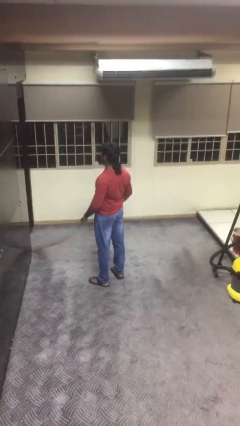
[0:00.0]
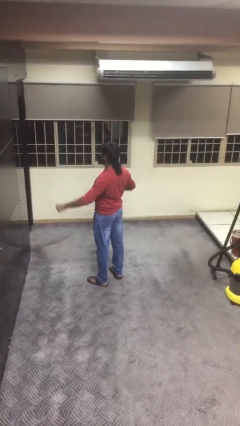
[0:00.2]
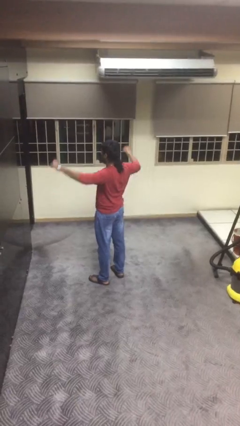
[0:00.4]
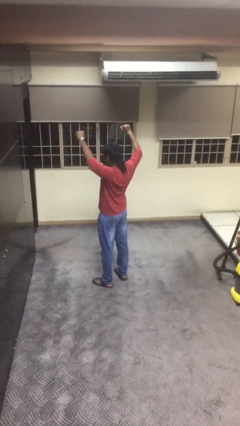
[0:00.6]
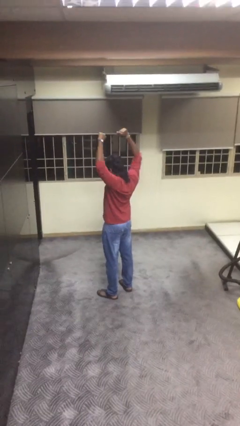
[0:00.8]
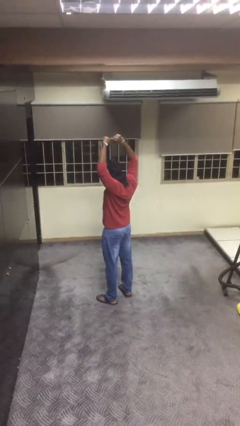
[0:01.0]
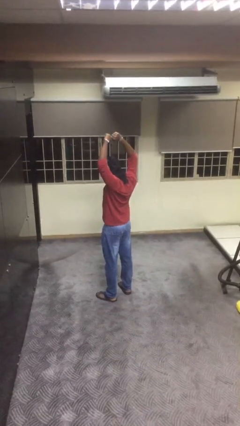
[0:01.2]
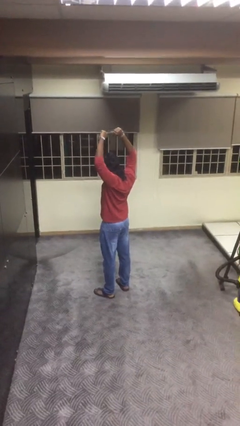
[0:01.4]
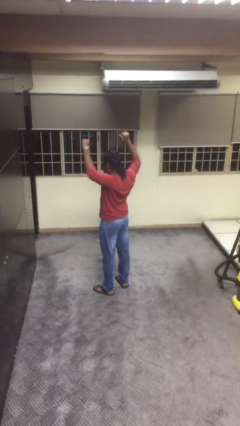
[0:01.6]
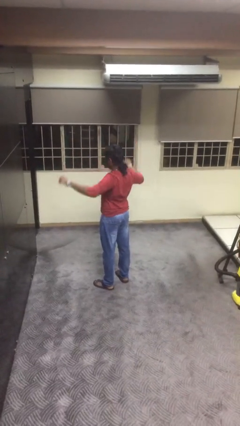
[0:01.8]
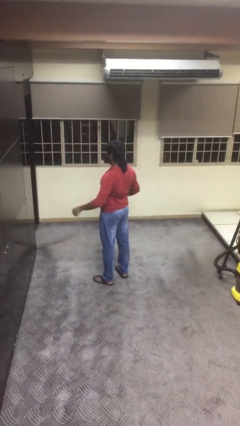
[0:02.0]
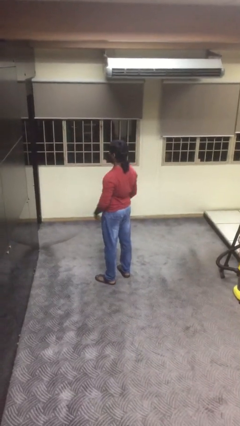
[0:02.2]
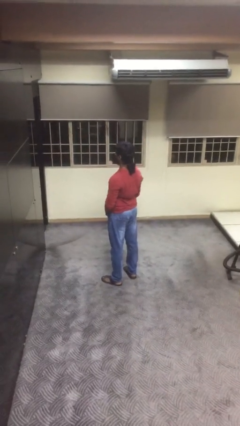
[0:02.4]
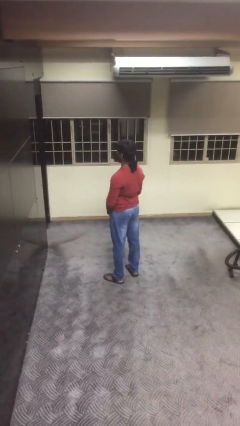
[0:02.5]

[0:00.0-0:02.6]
person stretches arms over head

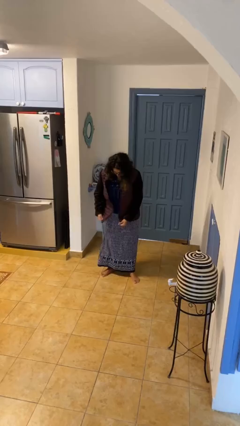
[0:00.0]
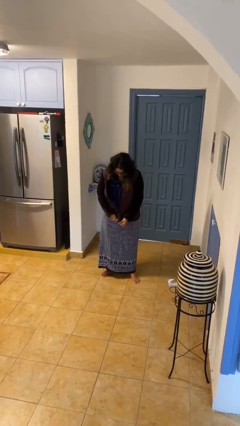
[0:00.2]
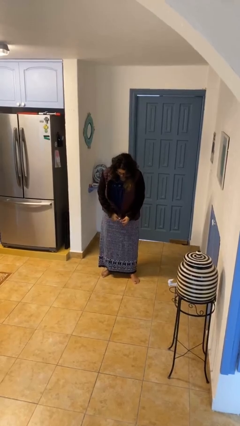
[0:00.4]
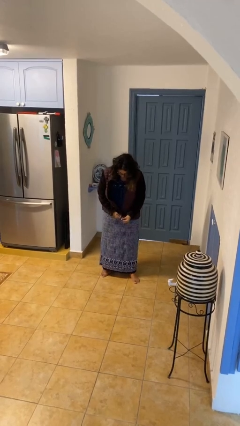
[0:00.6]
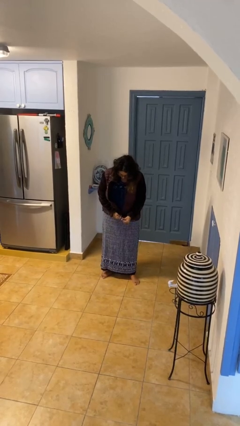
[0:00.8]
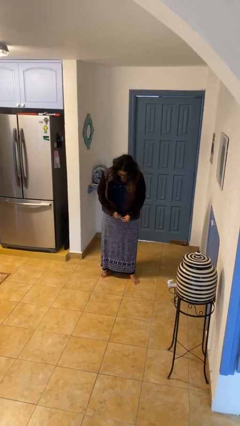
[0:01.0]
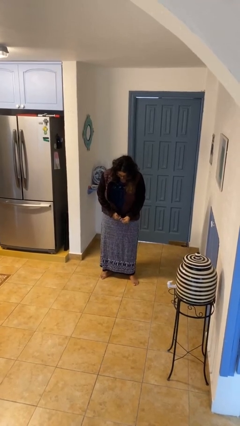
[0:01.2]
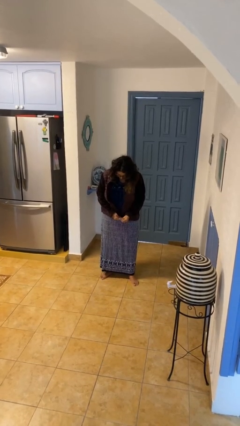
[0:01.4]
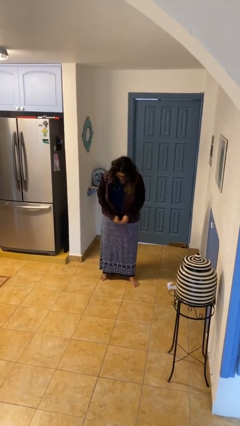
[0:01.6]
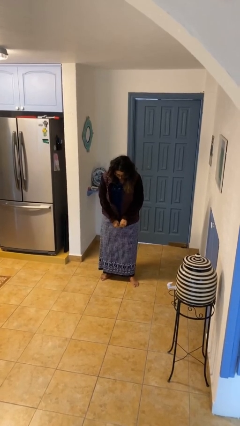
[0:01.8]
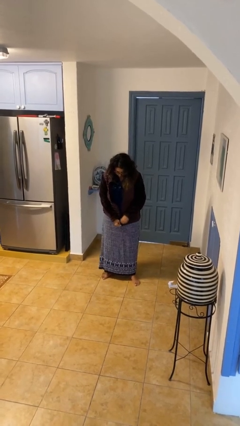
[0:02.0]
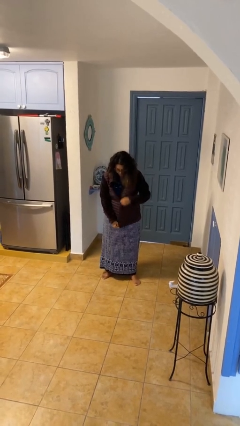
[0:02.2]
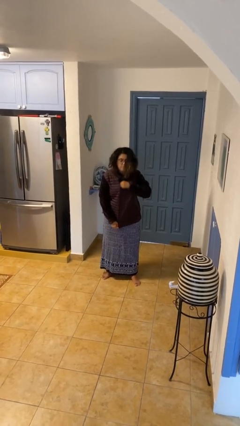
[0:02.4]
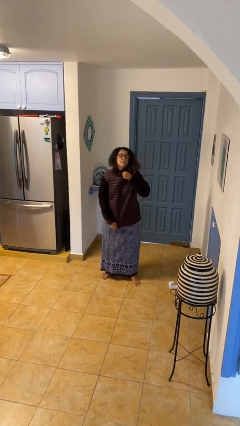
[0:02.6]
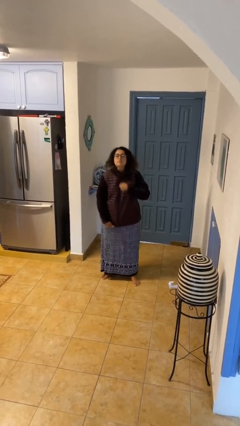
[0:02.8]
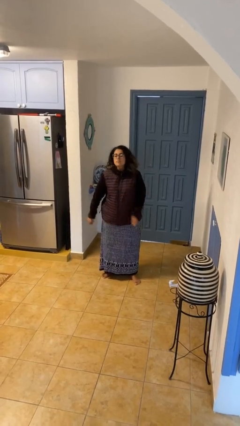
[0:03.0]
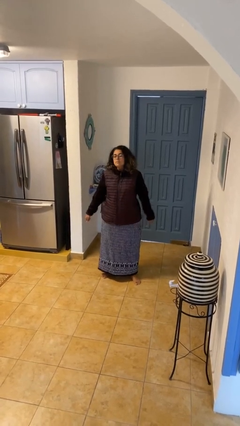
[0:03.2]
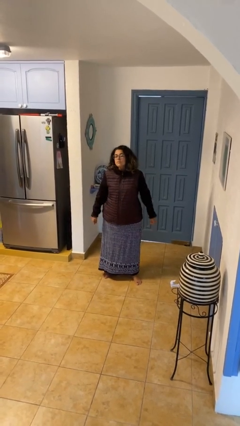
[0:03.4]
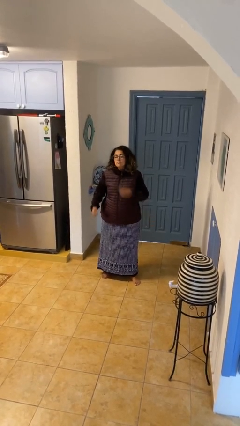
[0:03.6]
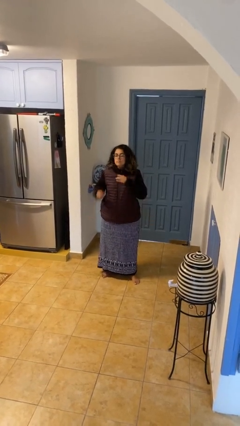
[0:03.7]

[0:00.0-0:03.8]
person zips up jacket

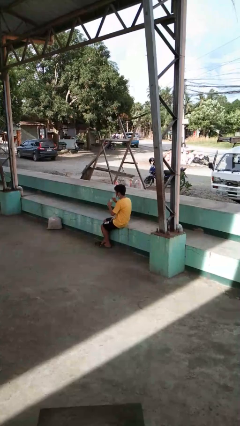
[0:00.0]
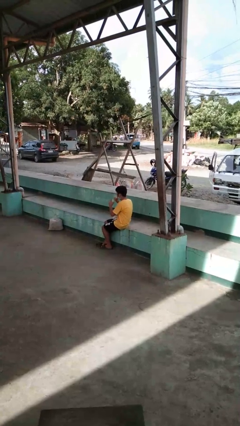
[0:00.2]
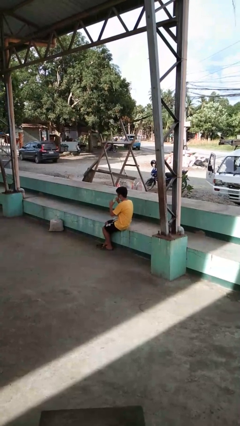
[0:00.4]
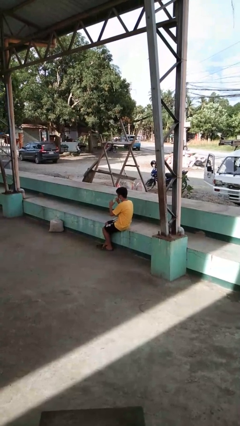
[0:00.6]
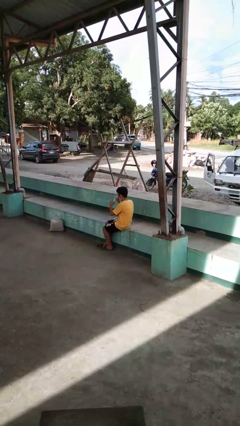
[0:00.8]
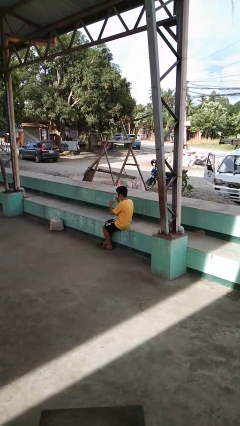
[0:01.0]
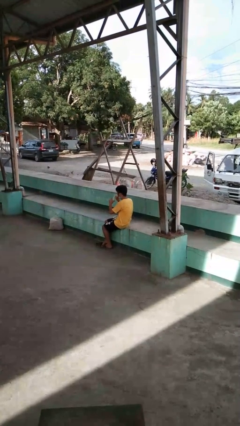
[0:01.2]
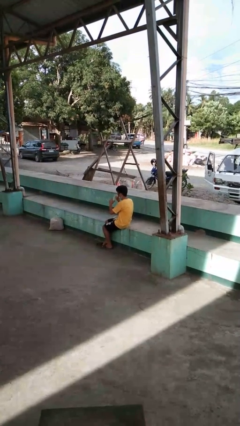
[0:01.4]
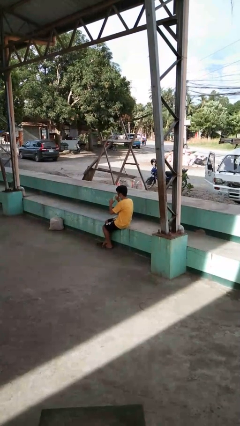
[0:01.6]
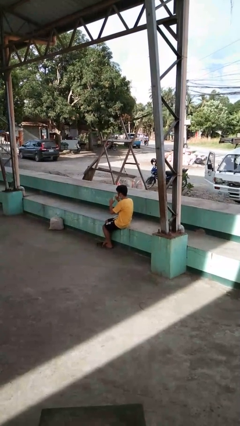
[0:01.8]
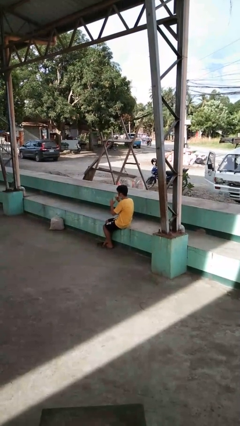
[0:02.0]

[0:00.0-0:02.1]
person drinks from straw

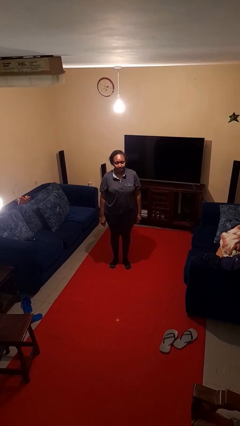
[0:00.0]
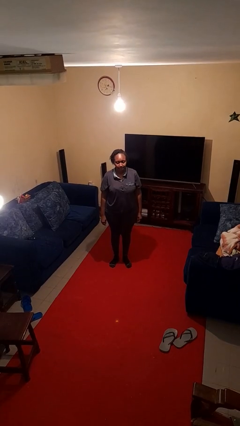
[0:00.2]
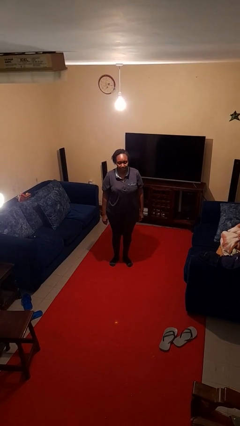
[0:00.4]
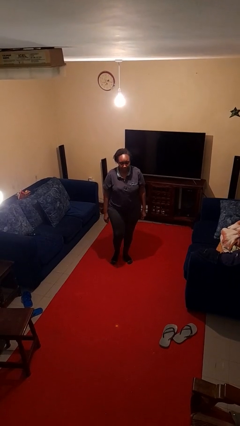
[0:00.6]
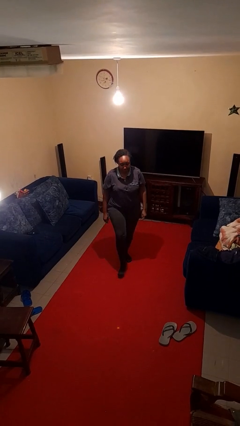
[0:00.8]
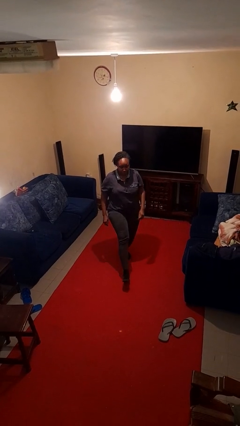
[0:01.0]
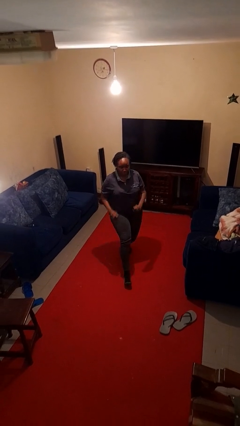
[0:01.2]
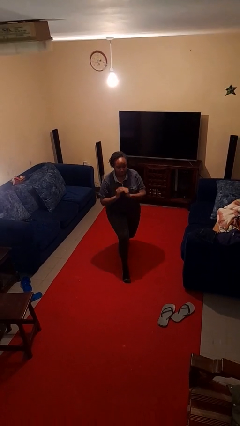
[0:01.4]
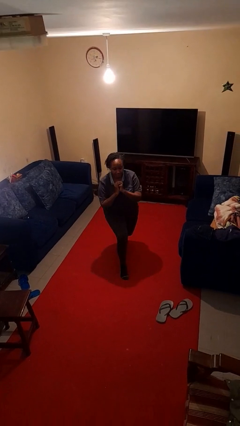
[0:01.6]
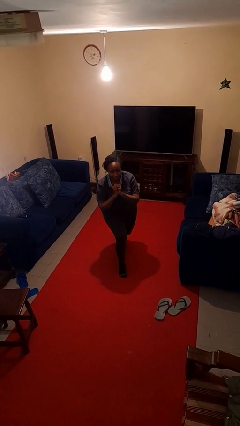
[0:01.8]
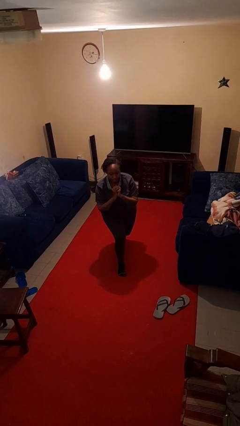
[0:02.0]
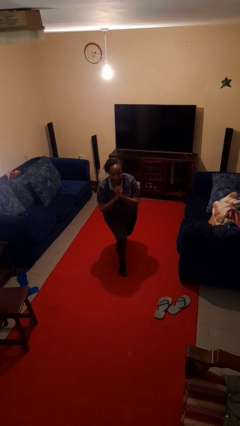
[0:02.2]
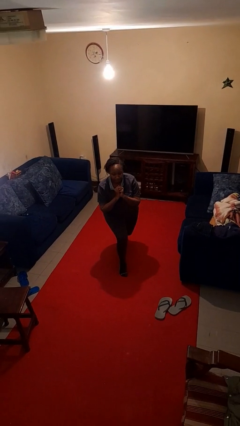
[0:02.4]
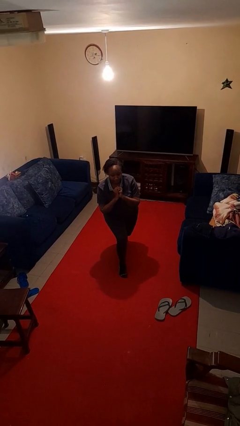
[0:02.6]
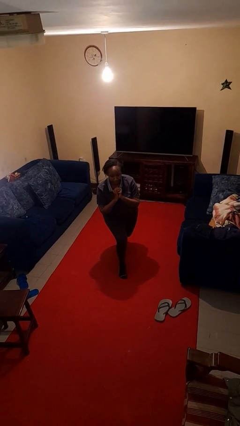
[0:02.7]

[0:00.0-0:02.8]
person exercises with lunges

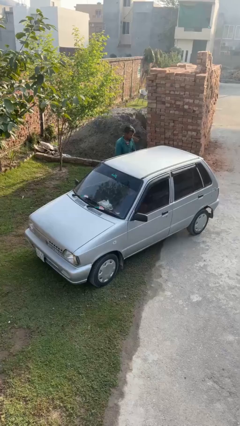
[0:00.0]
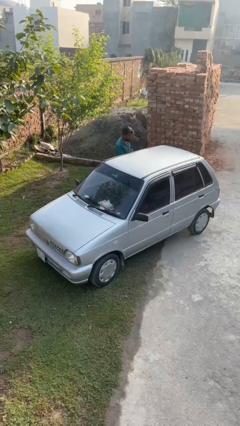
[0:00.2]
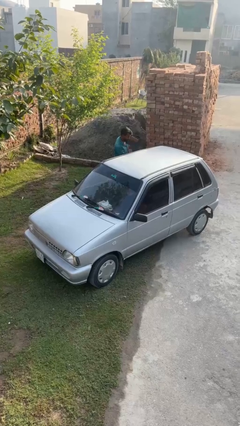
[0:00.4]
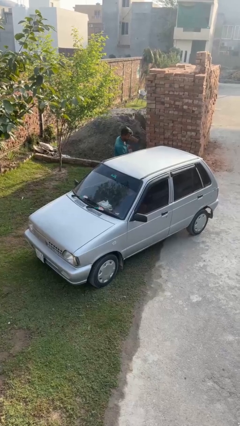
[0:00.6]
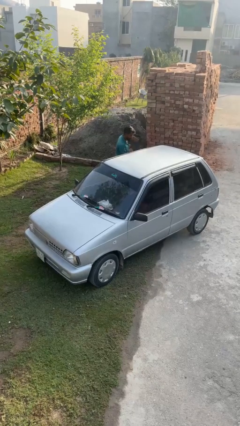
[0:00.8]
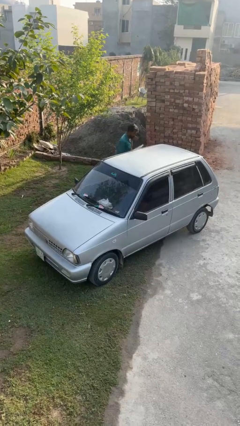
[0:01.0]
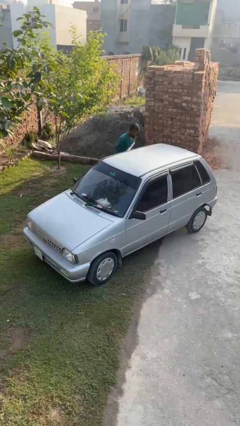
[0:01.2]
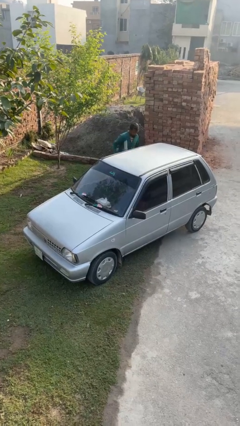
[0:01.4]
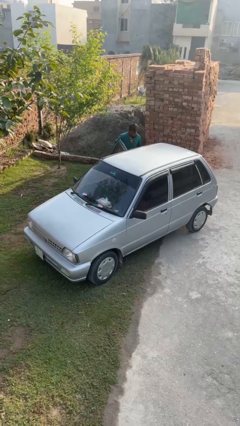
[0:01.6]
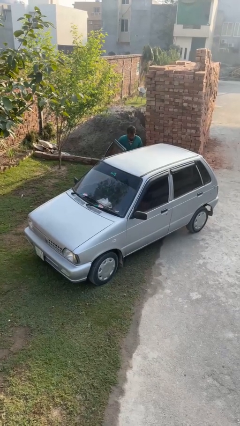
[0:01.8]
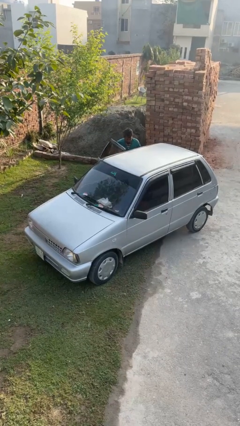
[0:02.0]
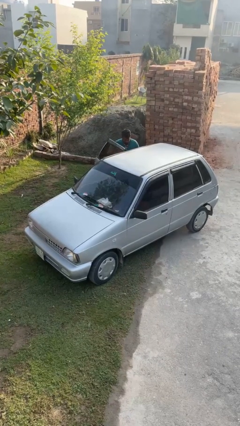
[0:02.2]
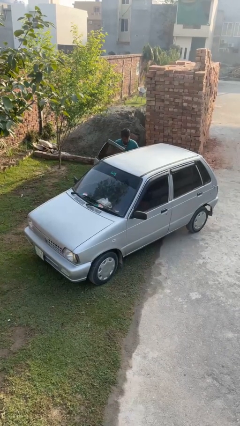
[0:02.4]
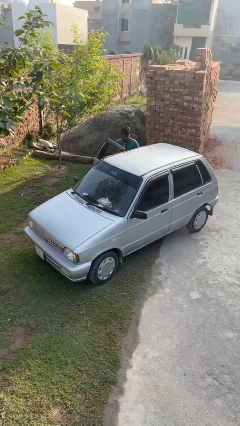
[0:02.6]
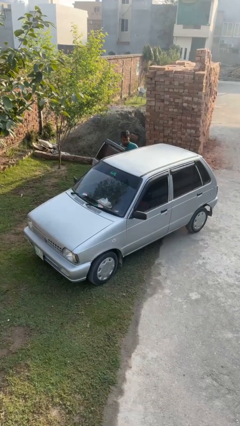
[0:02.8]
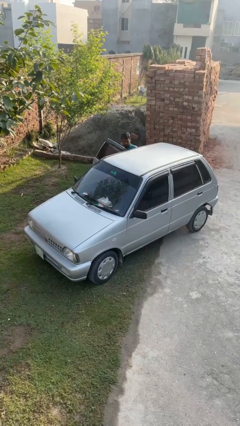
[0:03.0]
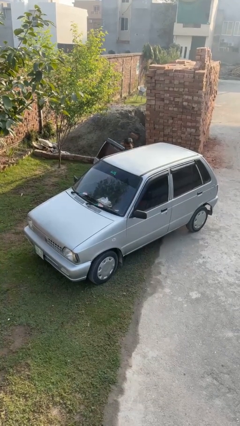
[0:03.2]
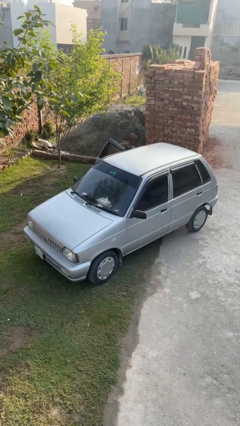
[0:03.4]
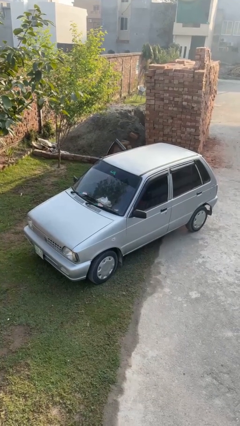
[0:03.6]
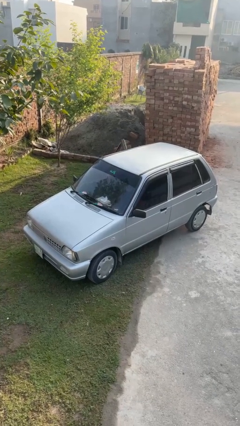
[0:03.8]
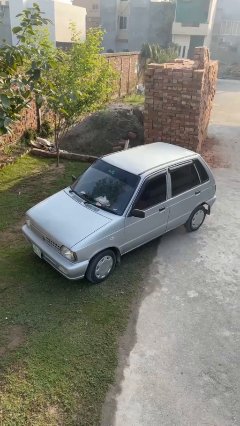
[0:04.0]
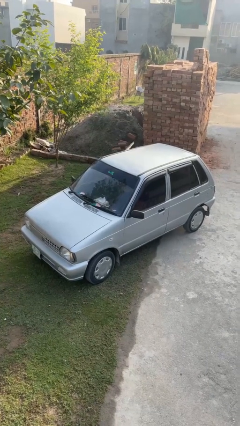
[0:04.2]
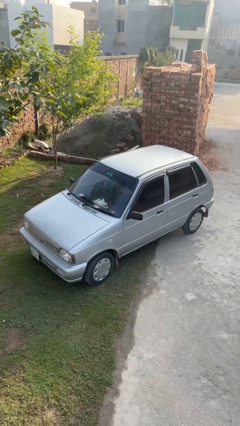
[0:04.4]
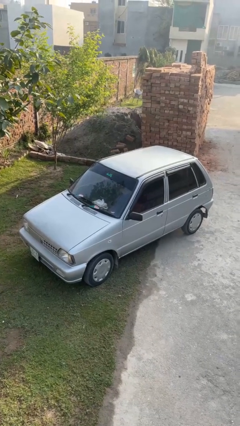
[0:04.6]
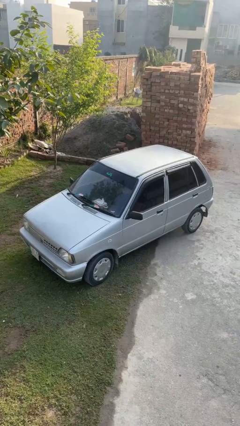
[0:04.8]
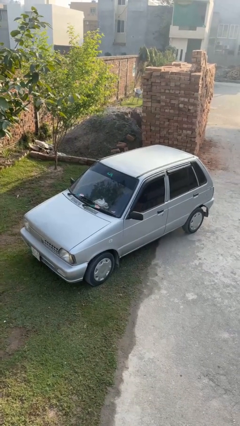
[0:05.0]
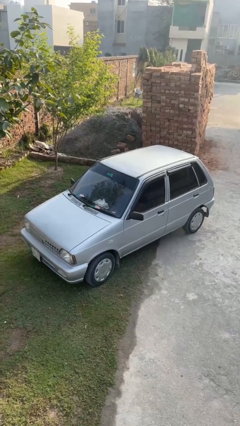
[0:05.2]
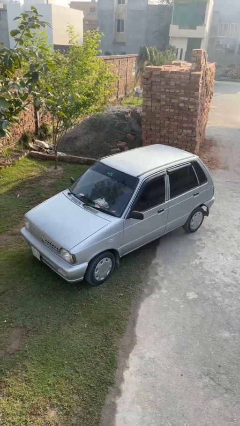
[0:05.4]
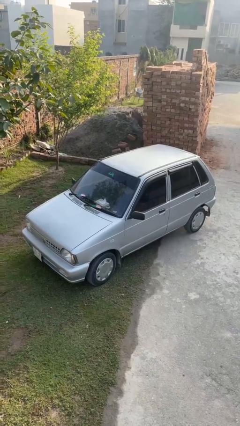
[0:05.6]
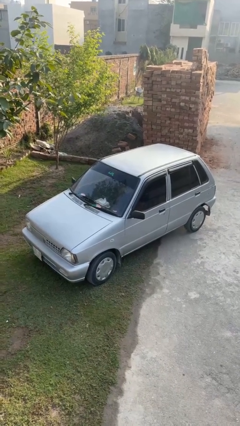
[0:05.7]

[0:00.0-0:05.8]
car picks up person

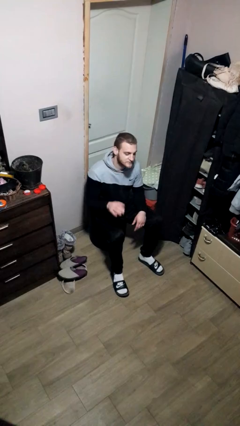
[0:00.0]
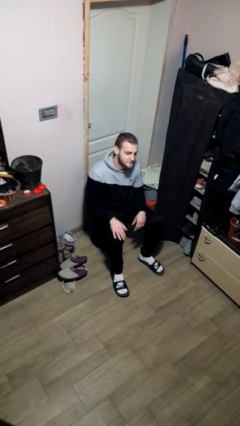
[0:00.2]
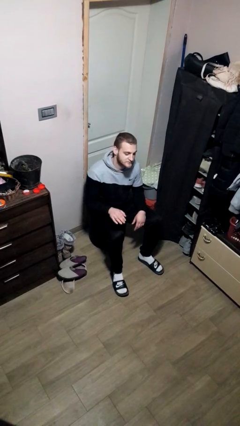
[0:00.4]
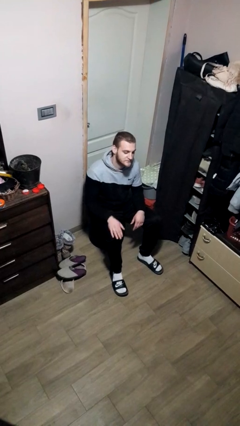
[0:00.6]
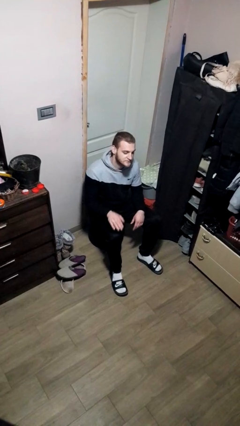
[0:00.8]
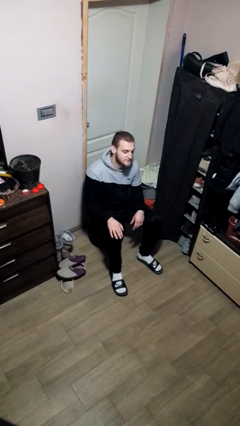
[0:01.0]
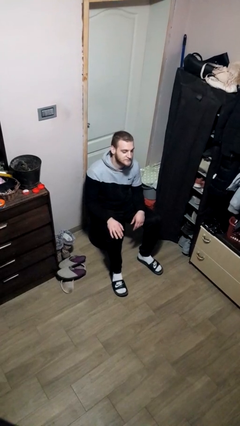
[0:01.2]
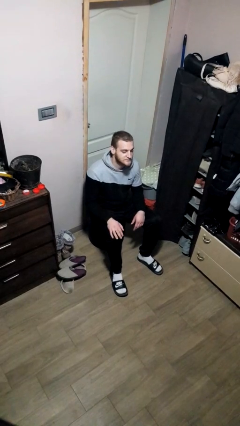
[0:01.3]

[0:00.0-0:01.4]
person slaps hands on thighs
